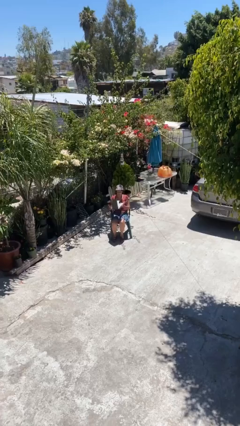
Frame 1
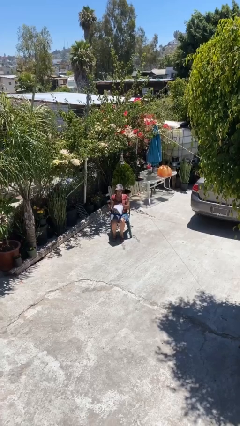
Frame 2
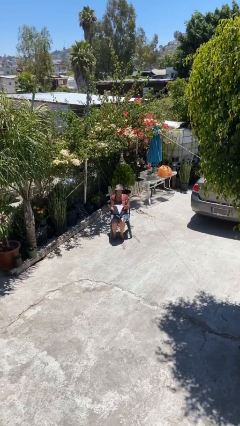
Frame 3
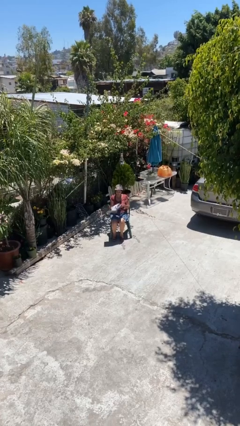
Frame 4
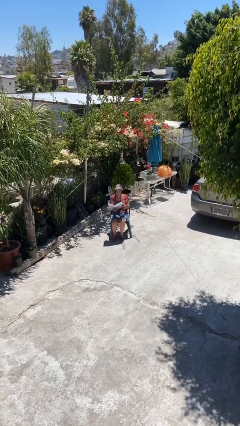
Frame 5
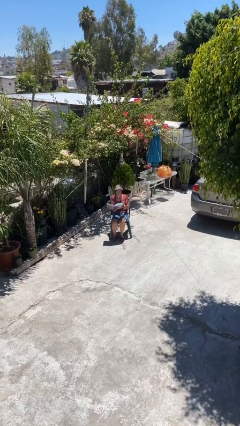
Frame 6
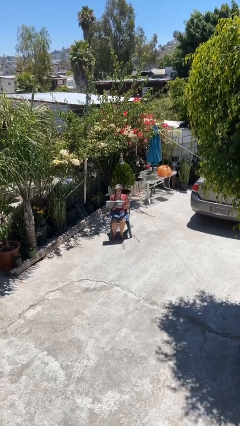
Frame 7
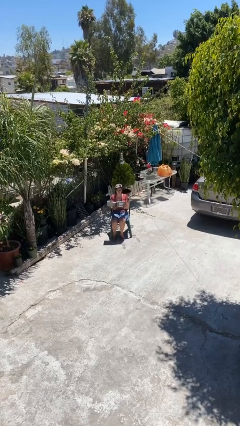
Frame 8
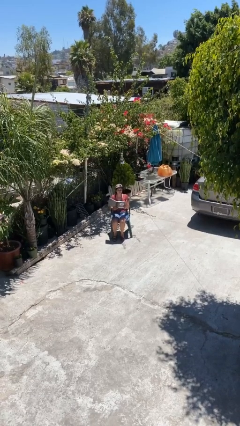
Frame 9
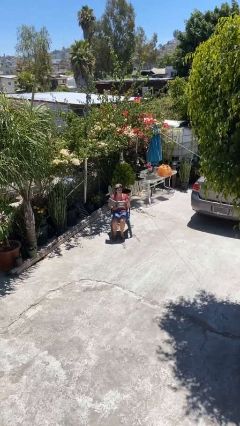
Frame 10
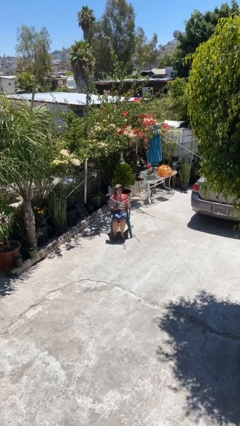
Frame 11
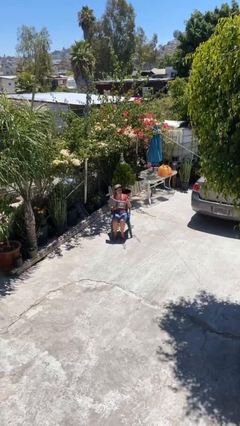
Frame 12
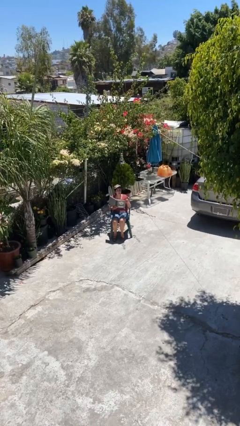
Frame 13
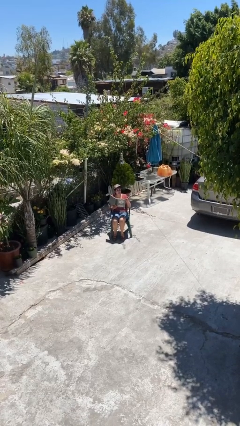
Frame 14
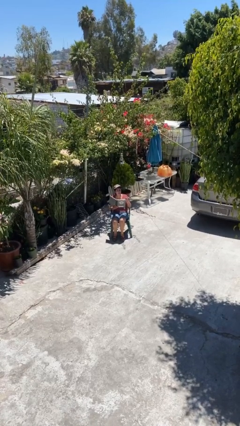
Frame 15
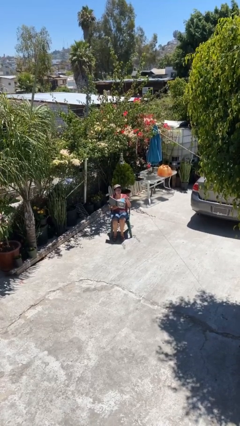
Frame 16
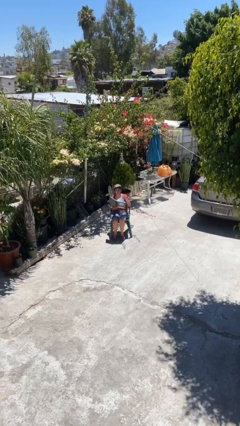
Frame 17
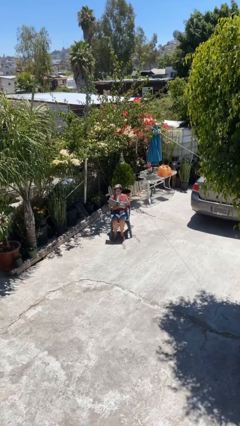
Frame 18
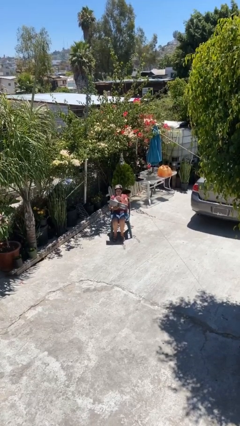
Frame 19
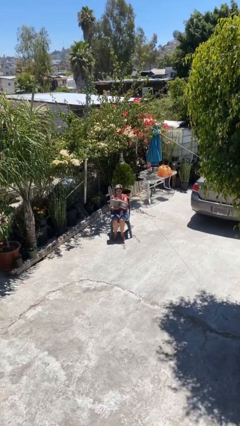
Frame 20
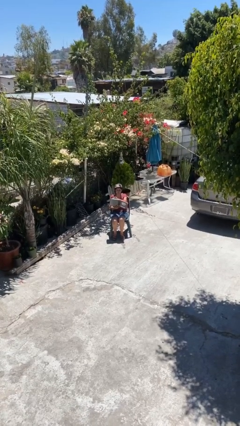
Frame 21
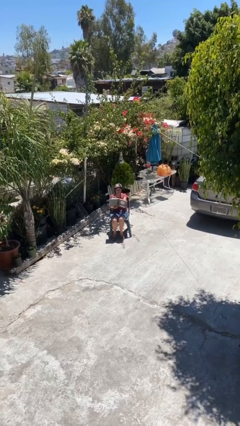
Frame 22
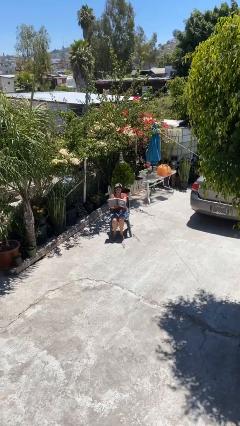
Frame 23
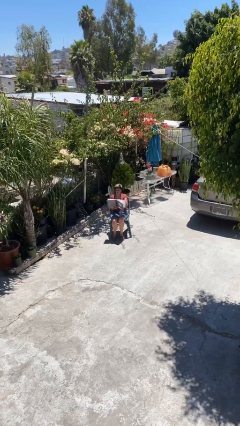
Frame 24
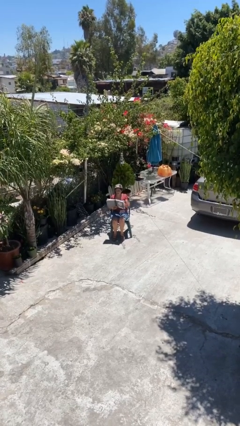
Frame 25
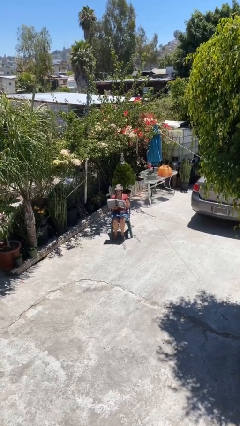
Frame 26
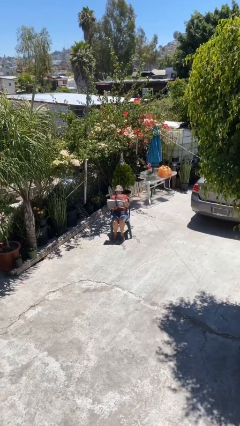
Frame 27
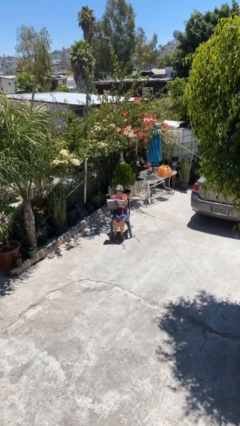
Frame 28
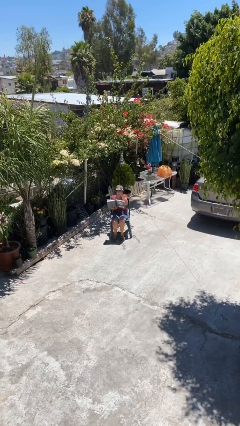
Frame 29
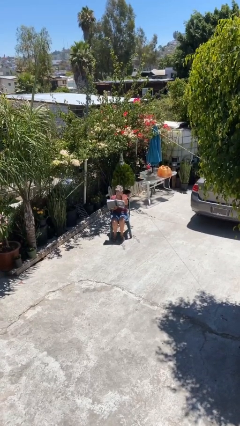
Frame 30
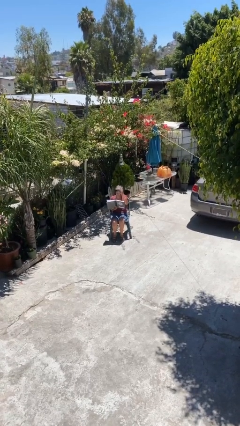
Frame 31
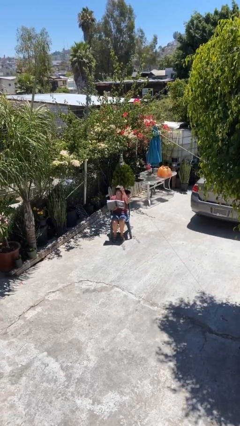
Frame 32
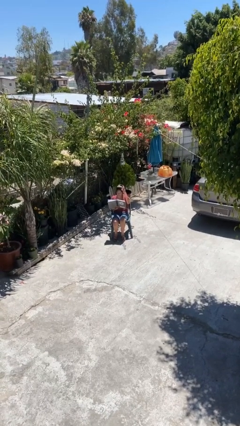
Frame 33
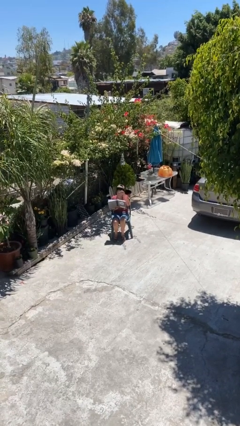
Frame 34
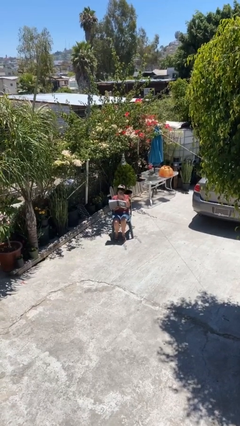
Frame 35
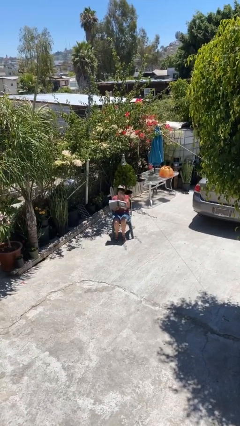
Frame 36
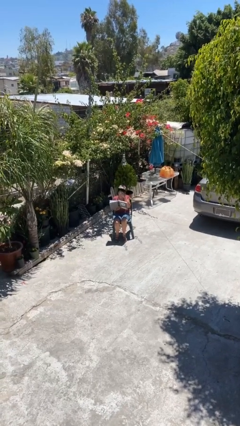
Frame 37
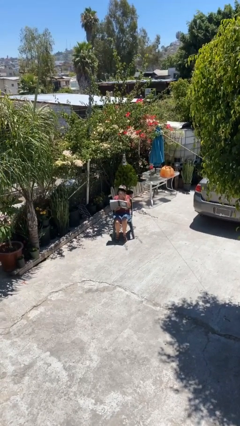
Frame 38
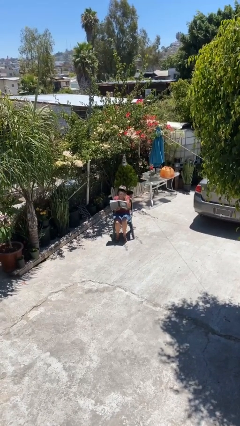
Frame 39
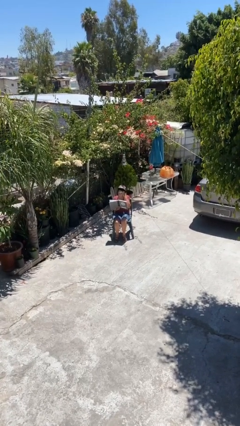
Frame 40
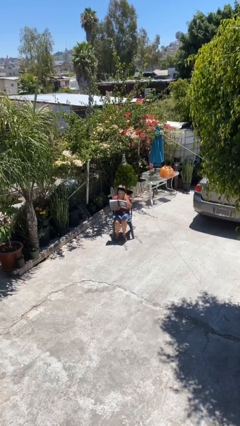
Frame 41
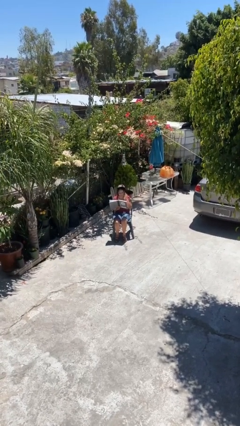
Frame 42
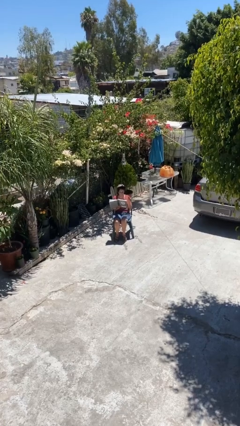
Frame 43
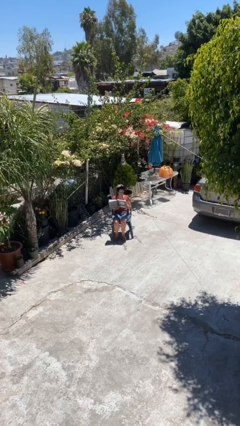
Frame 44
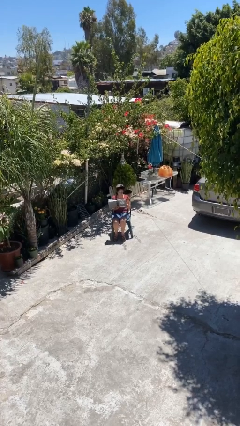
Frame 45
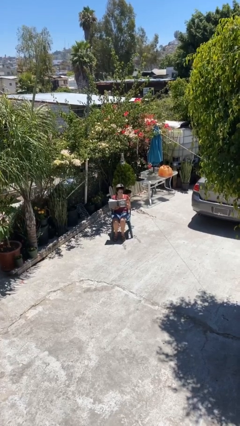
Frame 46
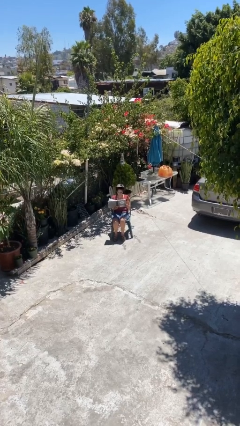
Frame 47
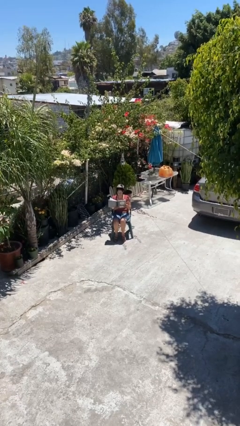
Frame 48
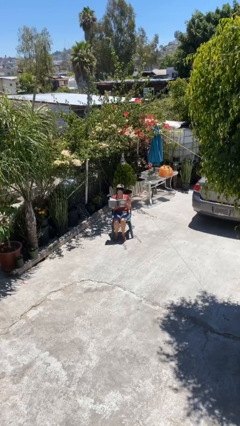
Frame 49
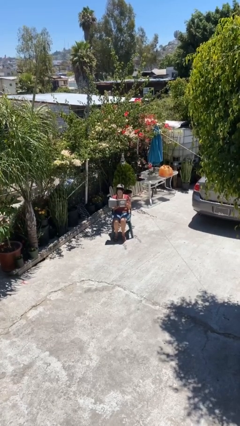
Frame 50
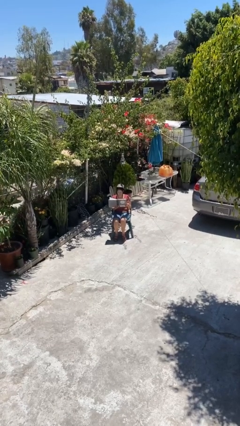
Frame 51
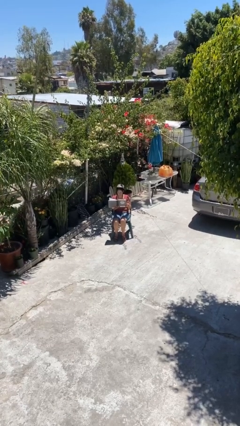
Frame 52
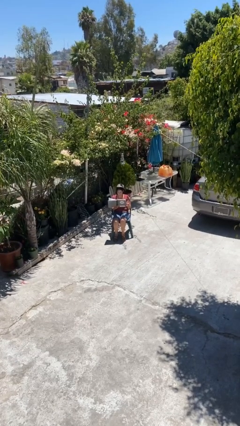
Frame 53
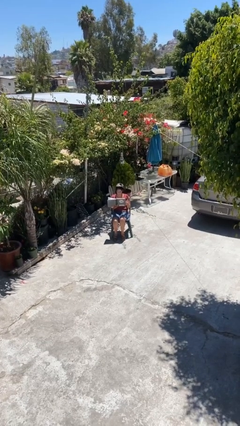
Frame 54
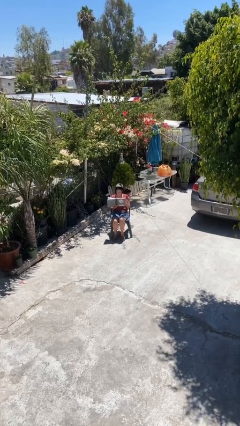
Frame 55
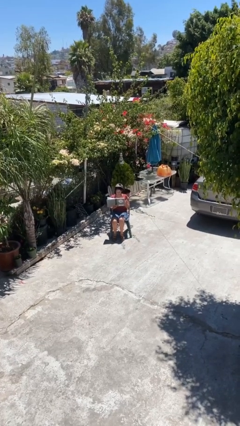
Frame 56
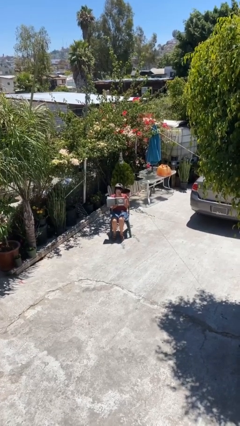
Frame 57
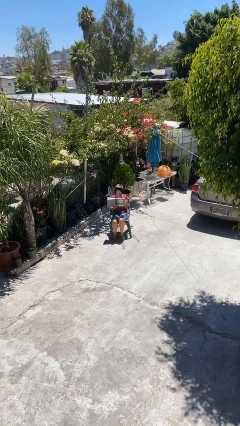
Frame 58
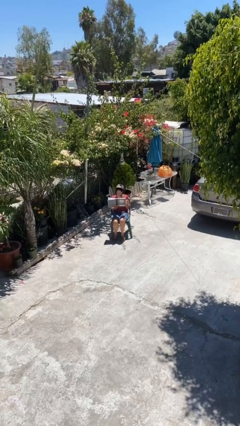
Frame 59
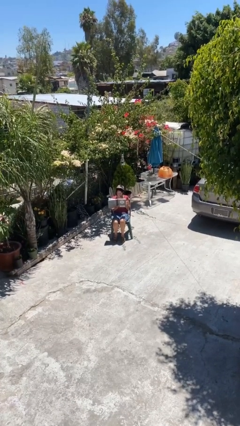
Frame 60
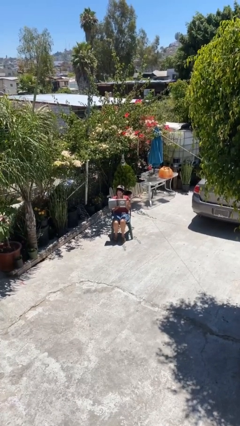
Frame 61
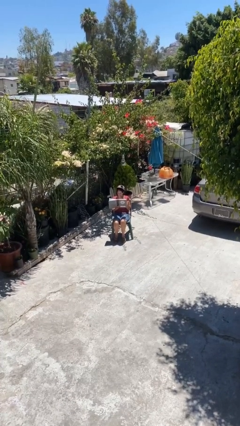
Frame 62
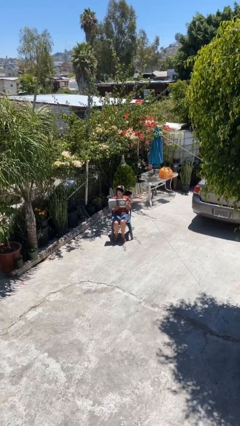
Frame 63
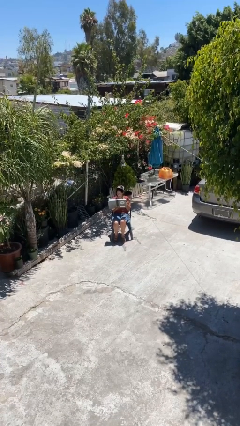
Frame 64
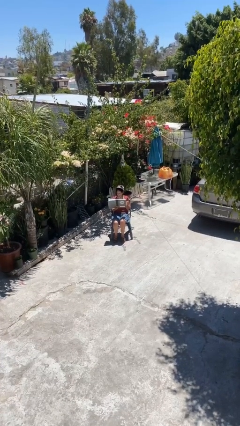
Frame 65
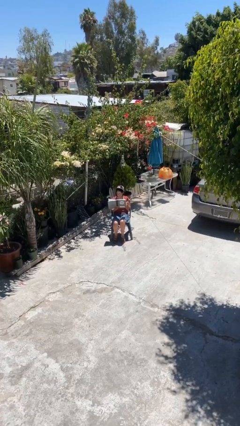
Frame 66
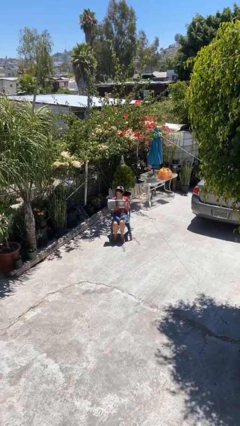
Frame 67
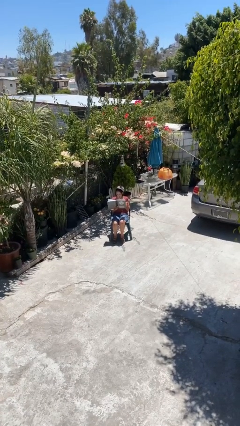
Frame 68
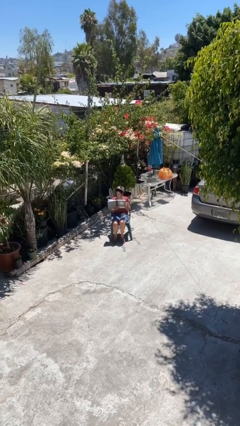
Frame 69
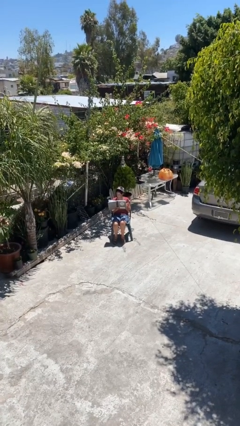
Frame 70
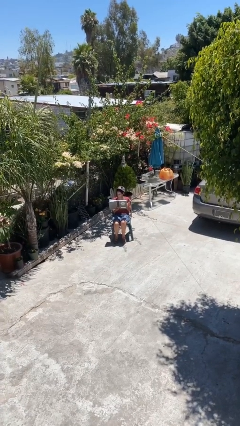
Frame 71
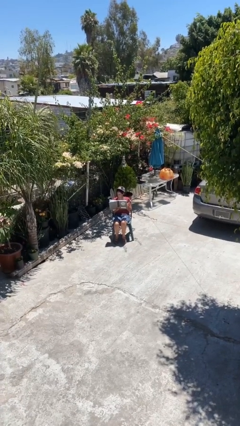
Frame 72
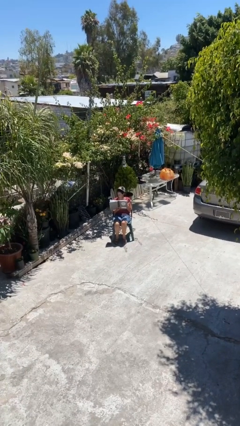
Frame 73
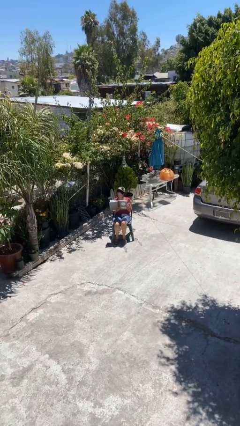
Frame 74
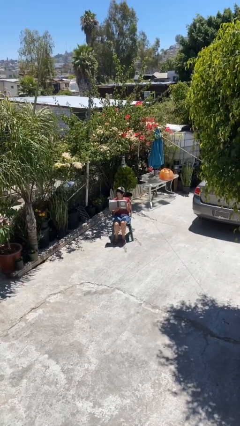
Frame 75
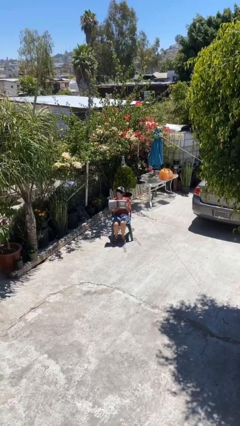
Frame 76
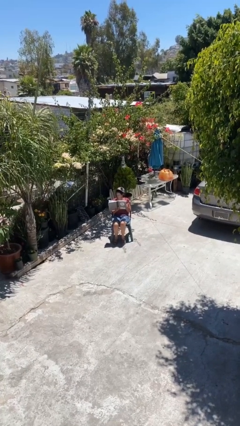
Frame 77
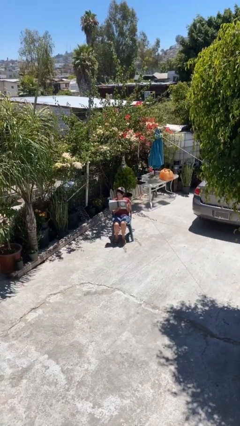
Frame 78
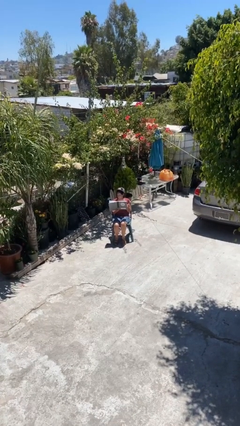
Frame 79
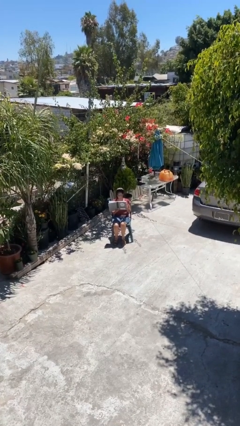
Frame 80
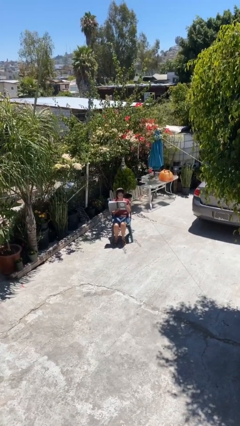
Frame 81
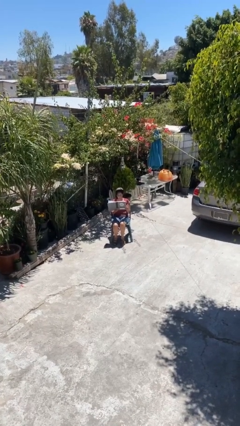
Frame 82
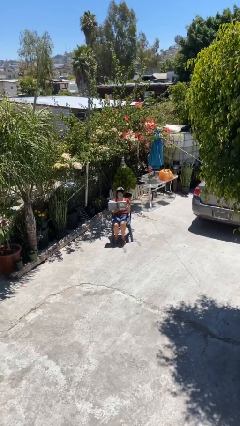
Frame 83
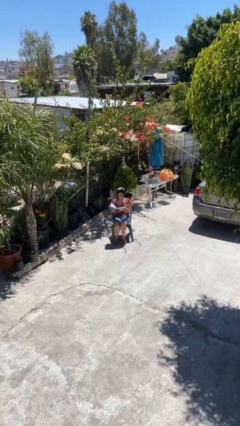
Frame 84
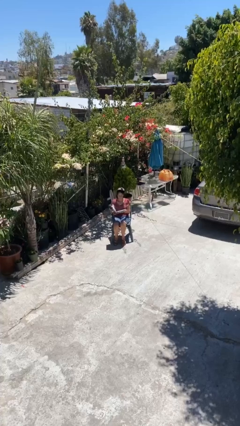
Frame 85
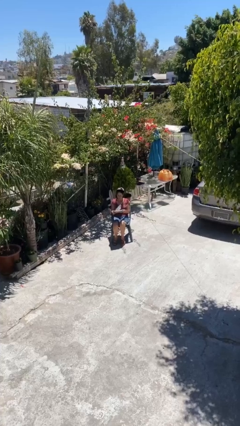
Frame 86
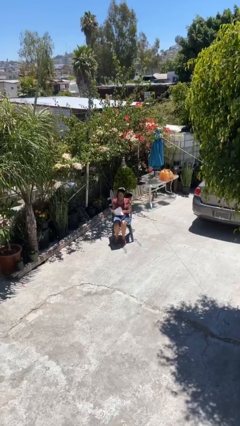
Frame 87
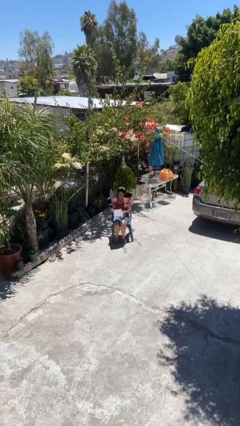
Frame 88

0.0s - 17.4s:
person reads document

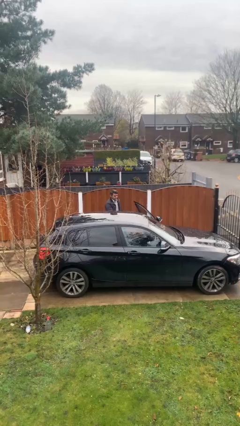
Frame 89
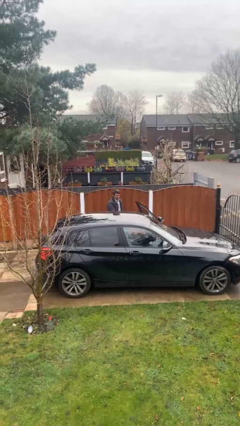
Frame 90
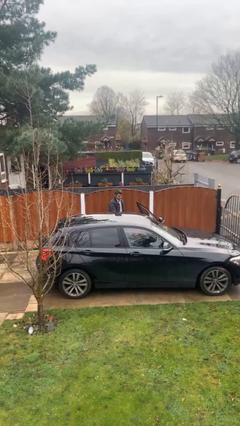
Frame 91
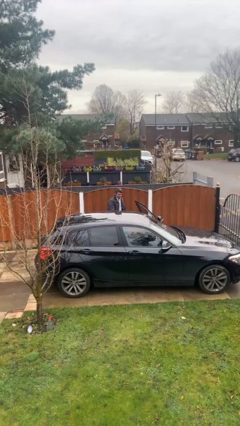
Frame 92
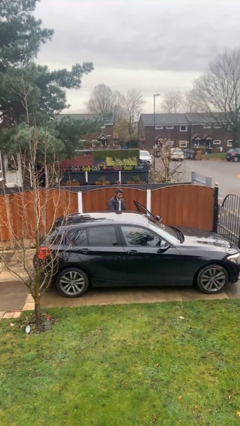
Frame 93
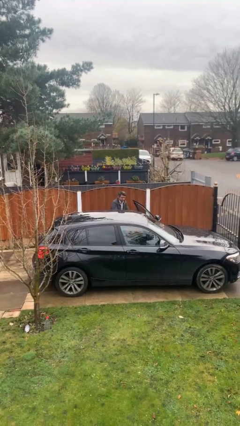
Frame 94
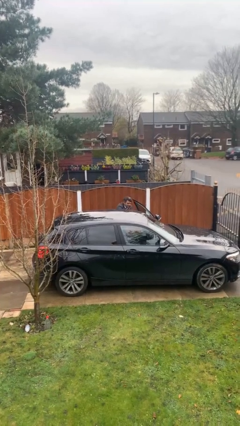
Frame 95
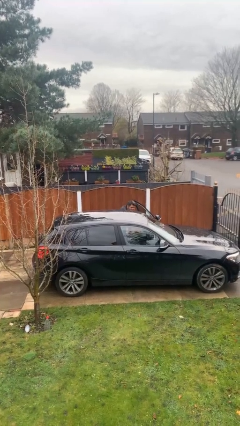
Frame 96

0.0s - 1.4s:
person unloads car
